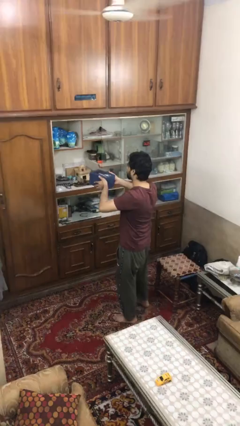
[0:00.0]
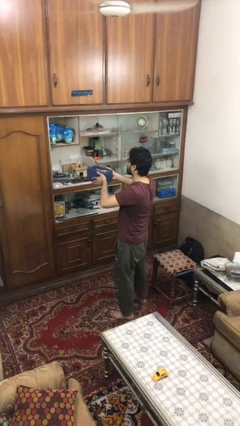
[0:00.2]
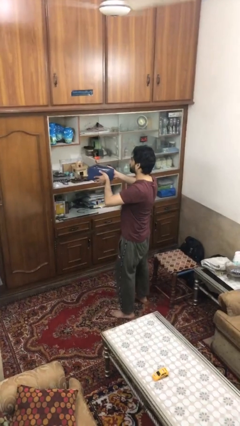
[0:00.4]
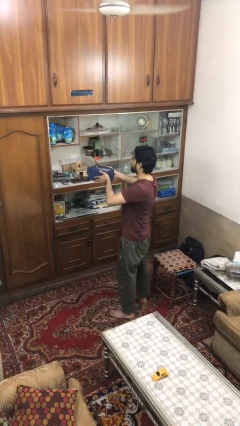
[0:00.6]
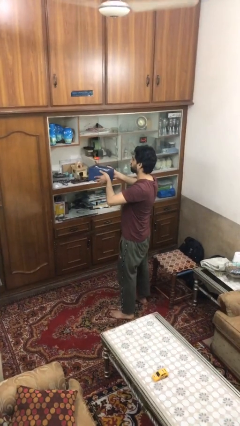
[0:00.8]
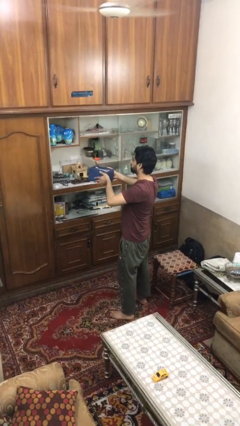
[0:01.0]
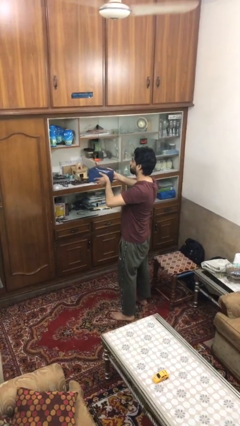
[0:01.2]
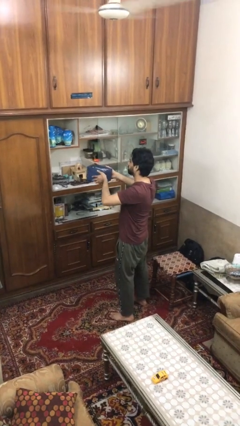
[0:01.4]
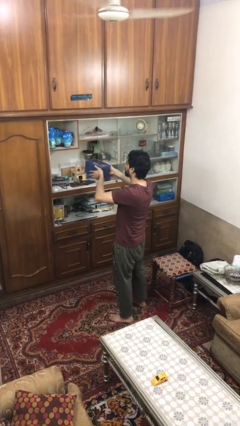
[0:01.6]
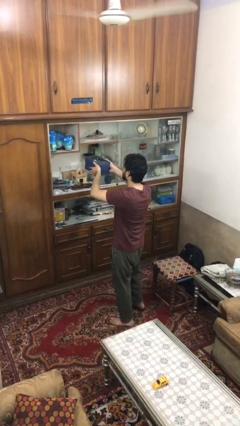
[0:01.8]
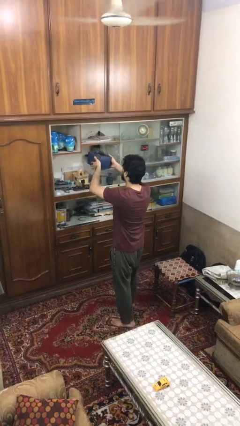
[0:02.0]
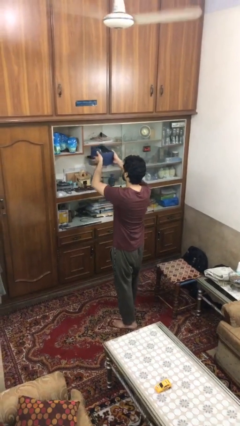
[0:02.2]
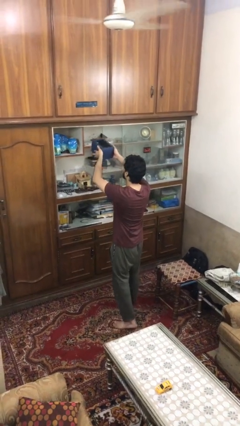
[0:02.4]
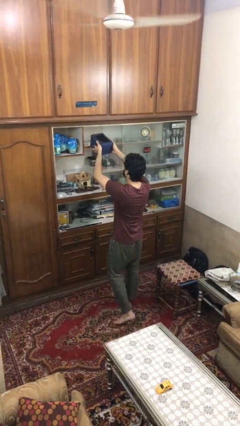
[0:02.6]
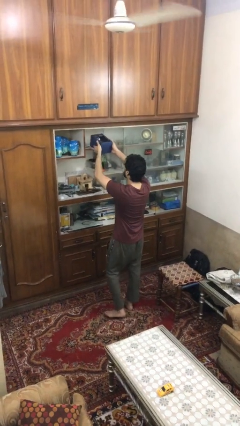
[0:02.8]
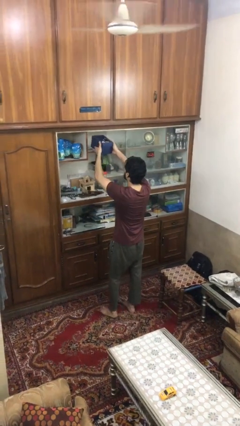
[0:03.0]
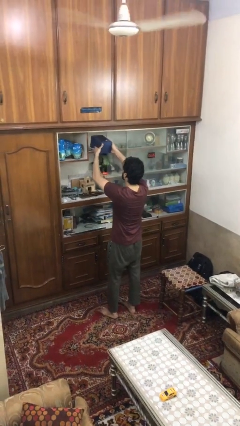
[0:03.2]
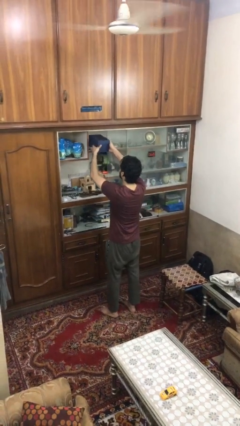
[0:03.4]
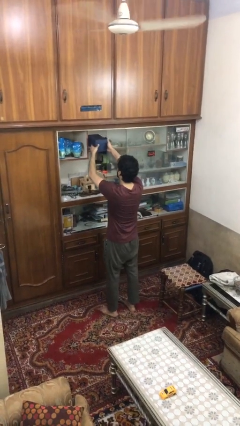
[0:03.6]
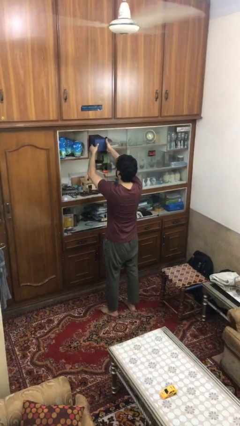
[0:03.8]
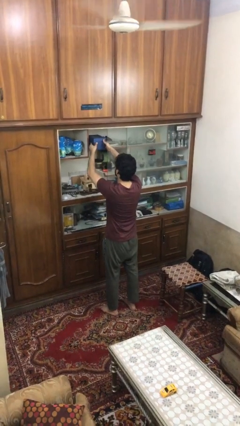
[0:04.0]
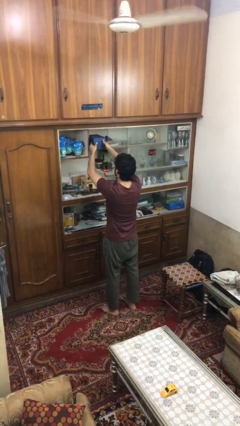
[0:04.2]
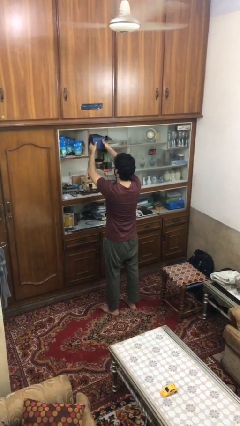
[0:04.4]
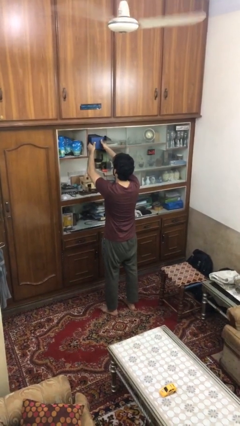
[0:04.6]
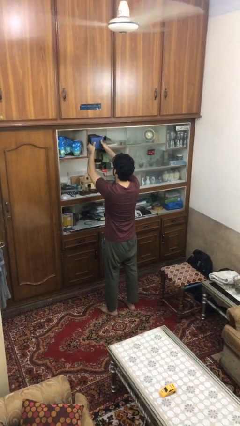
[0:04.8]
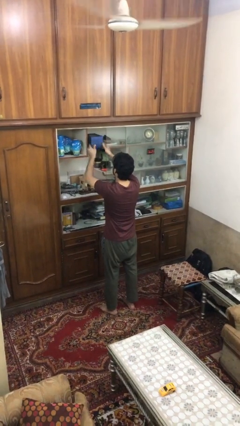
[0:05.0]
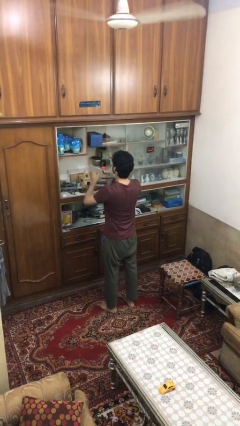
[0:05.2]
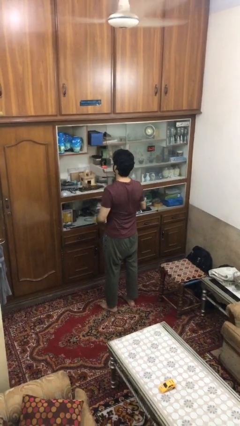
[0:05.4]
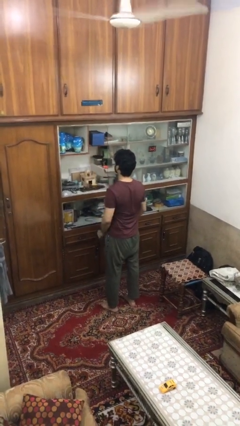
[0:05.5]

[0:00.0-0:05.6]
person puts down object on shelf

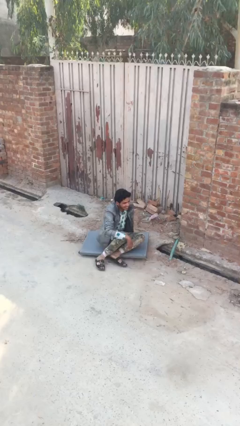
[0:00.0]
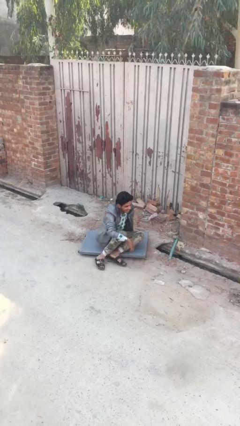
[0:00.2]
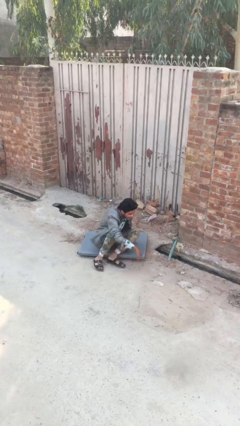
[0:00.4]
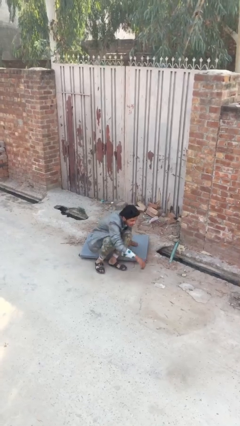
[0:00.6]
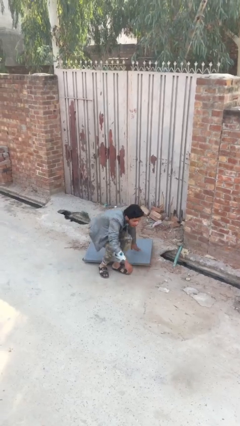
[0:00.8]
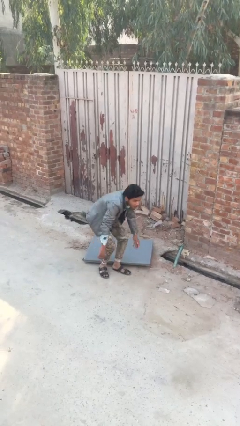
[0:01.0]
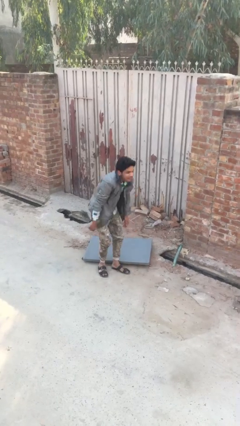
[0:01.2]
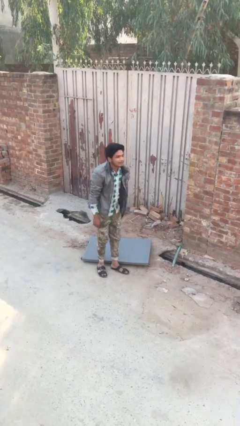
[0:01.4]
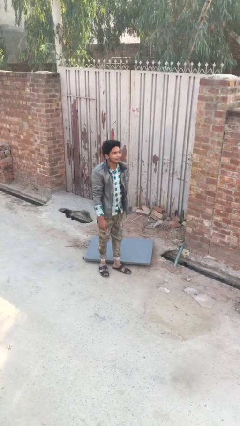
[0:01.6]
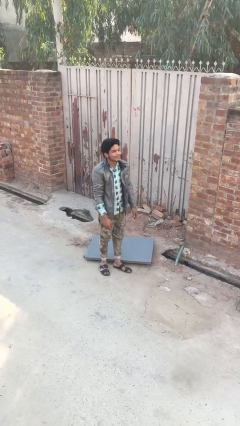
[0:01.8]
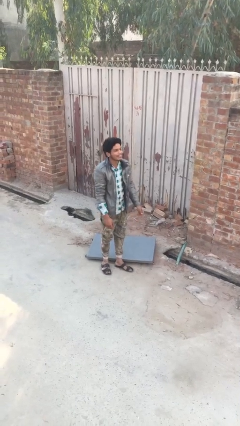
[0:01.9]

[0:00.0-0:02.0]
person stands up

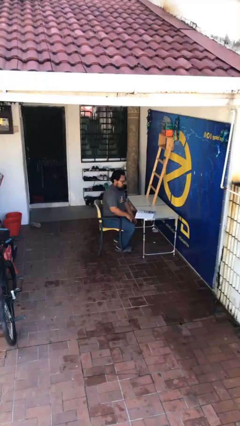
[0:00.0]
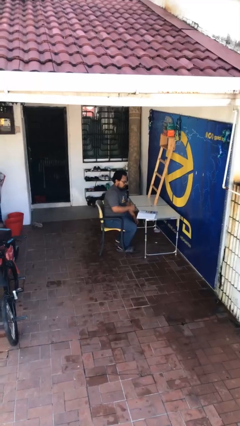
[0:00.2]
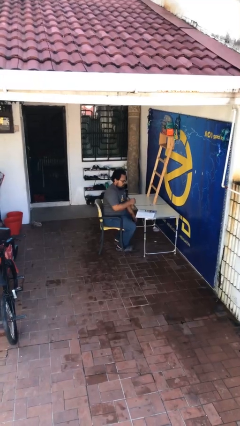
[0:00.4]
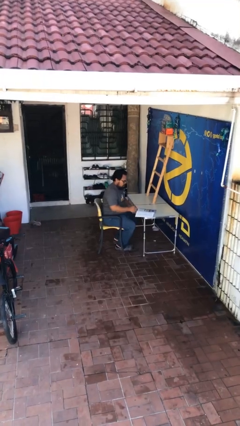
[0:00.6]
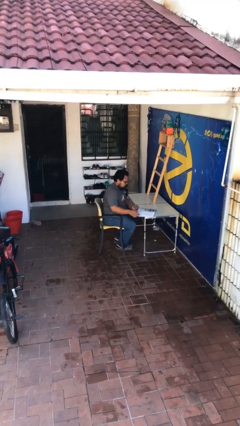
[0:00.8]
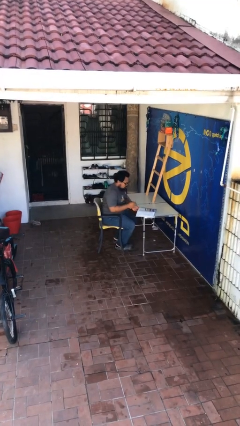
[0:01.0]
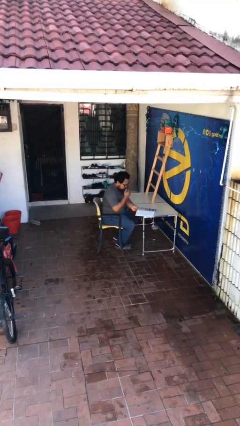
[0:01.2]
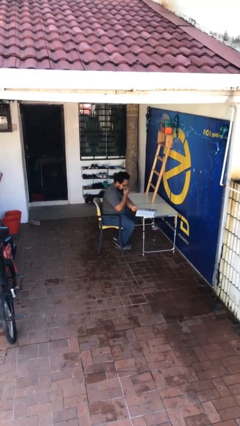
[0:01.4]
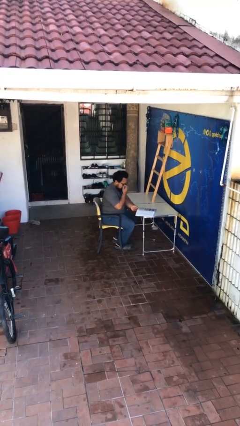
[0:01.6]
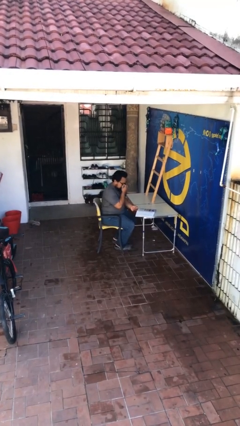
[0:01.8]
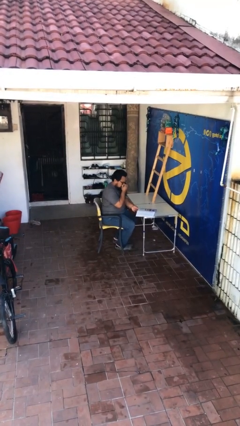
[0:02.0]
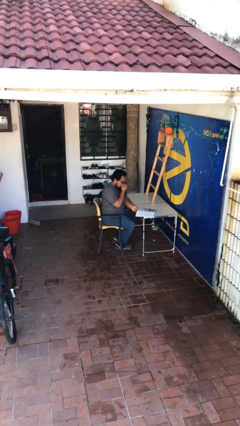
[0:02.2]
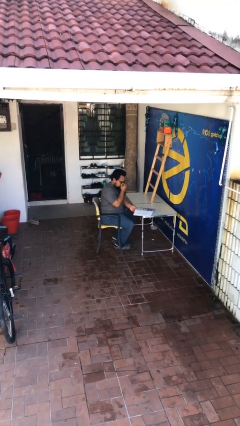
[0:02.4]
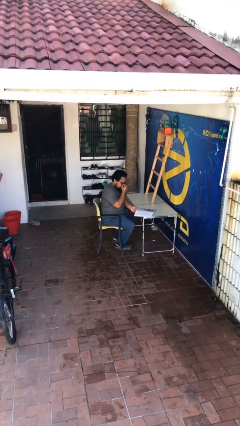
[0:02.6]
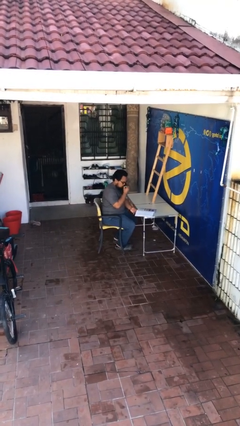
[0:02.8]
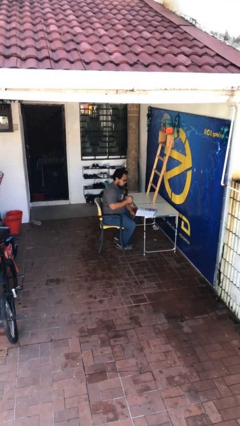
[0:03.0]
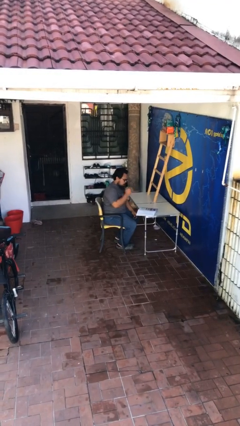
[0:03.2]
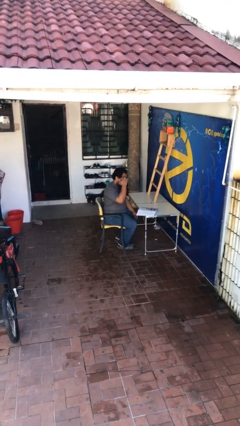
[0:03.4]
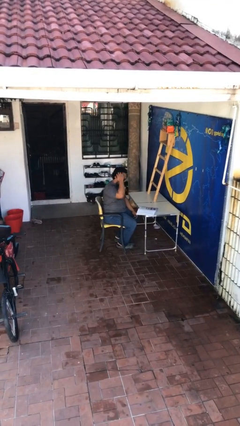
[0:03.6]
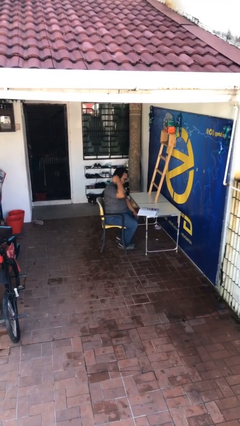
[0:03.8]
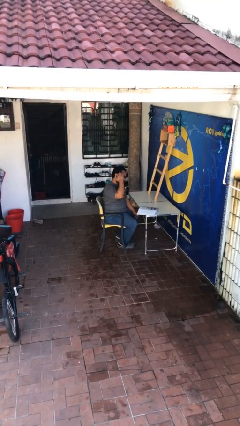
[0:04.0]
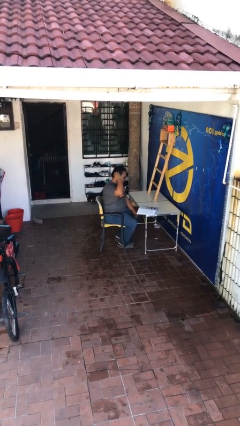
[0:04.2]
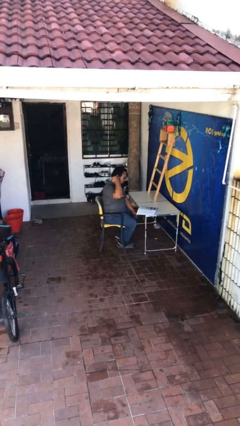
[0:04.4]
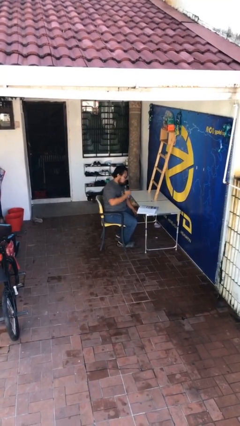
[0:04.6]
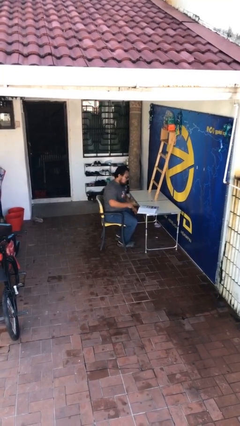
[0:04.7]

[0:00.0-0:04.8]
person reads document

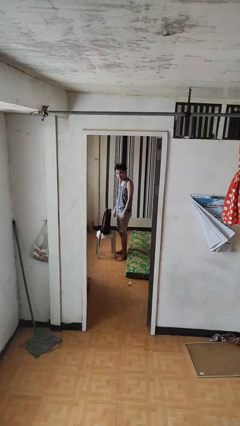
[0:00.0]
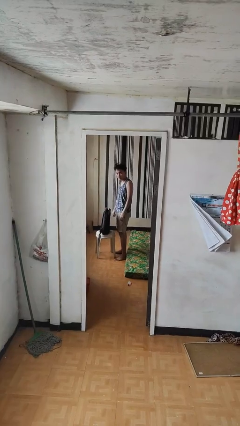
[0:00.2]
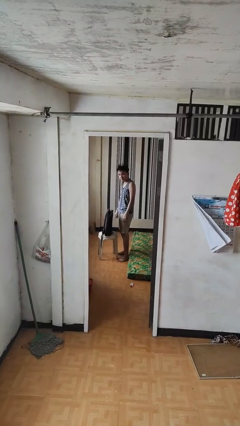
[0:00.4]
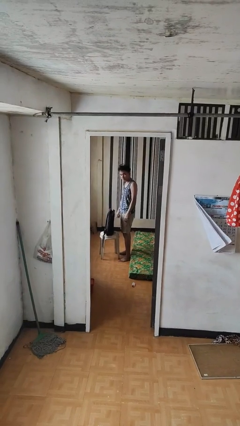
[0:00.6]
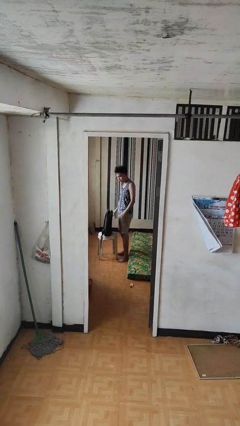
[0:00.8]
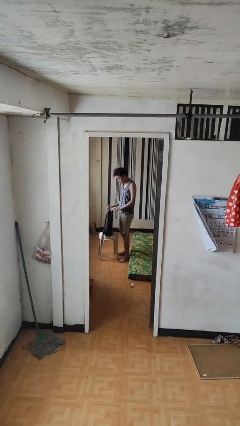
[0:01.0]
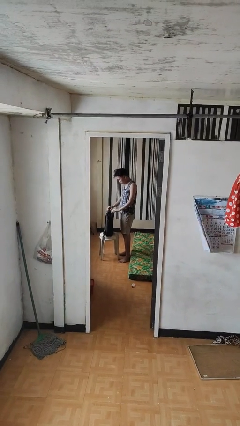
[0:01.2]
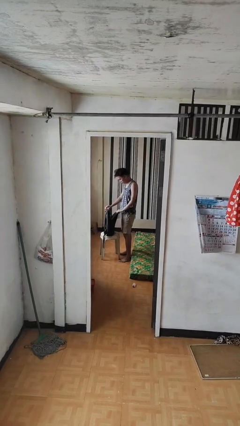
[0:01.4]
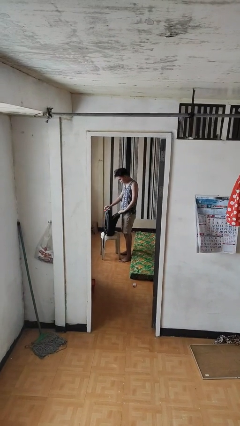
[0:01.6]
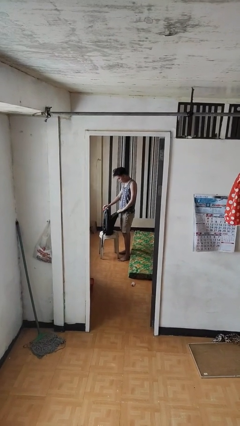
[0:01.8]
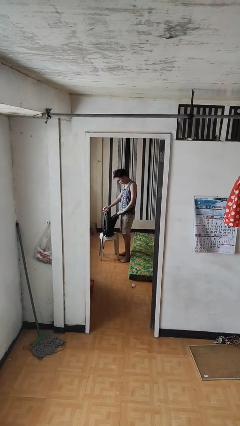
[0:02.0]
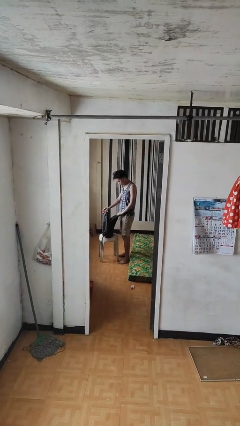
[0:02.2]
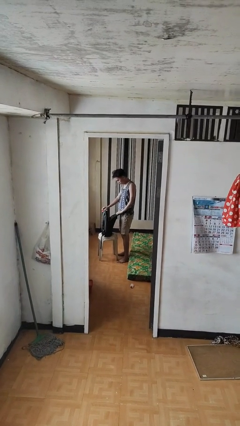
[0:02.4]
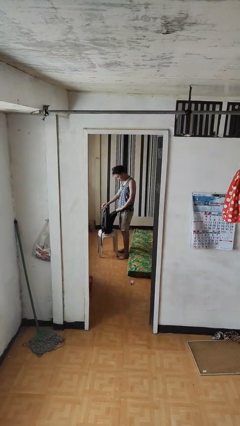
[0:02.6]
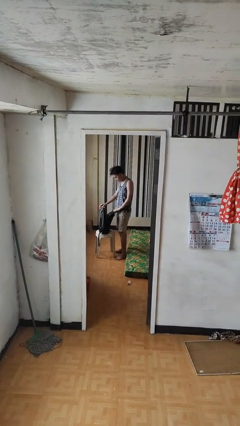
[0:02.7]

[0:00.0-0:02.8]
person searches in backpack

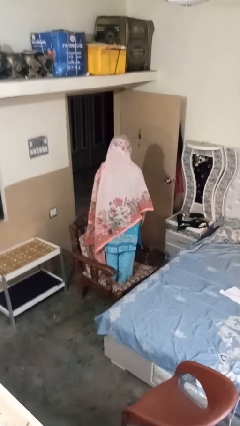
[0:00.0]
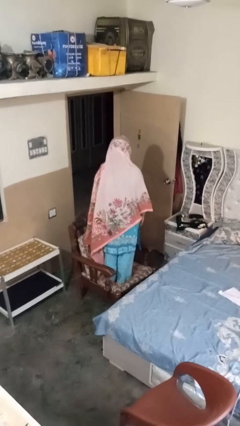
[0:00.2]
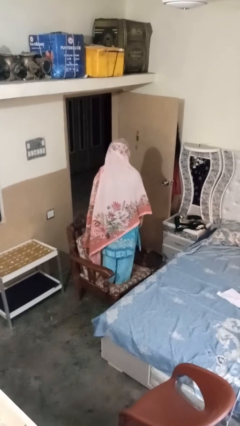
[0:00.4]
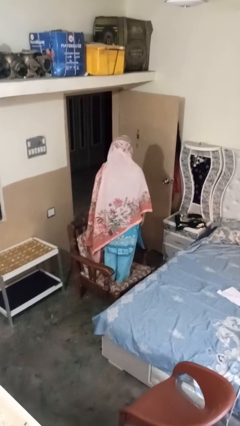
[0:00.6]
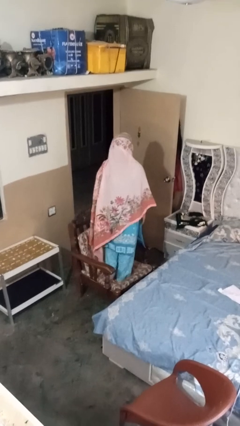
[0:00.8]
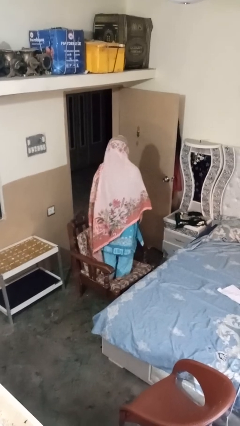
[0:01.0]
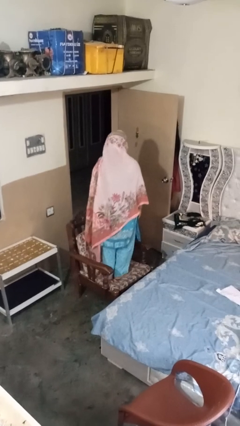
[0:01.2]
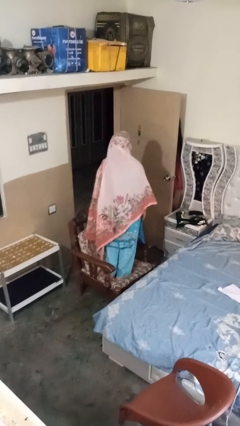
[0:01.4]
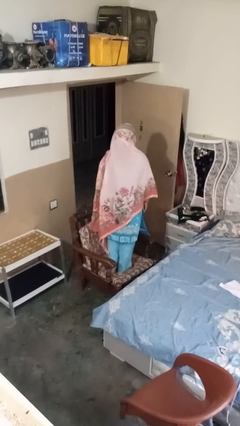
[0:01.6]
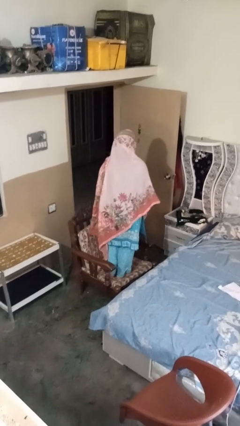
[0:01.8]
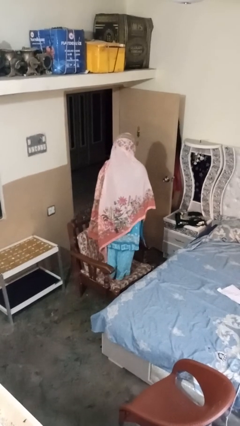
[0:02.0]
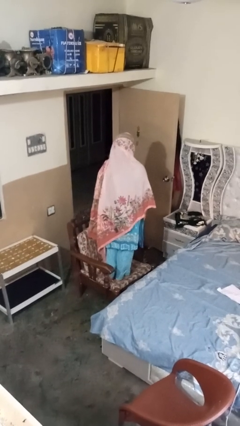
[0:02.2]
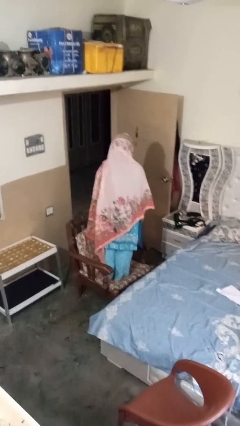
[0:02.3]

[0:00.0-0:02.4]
person jumps on couch
